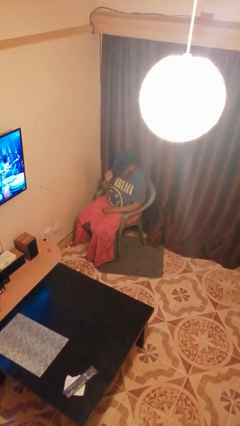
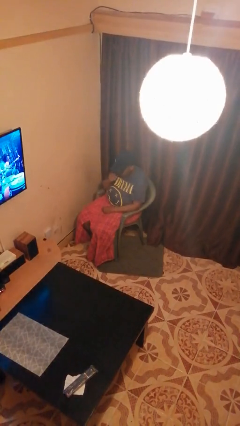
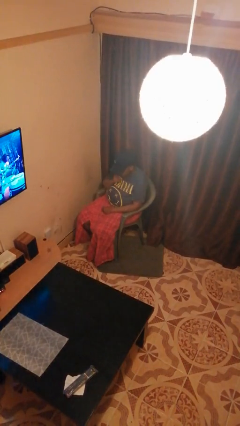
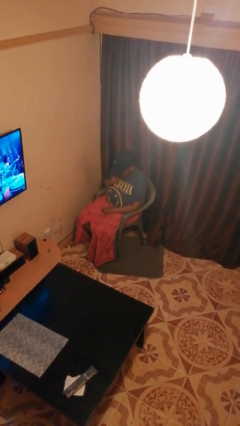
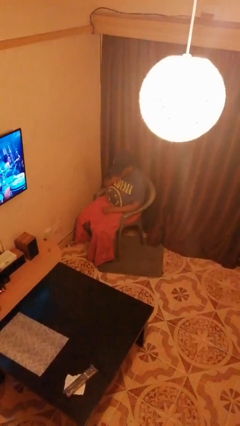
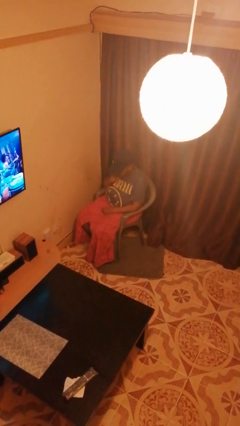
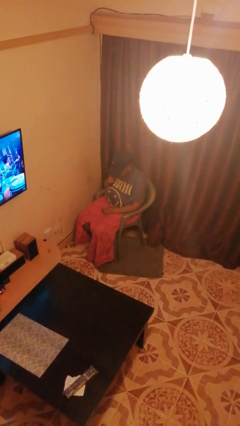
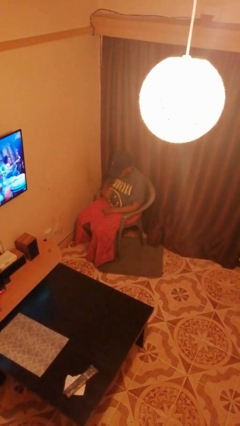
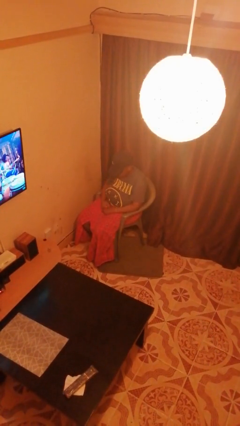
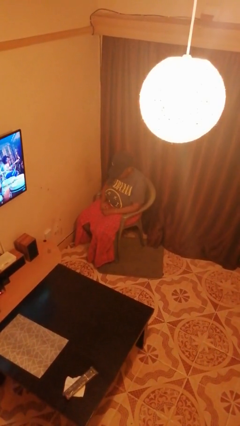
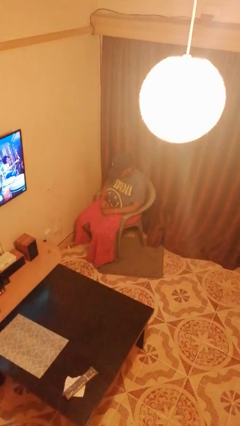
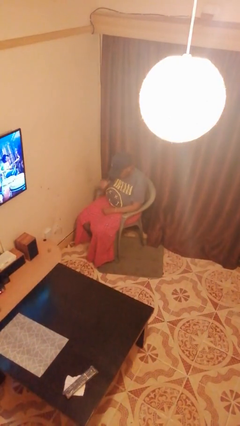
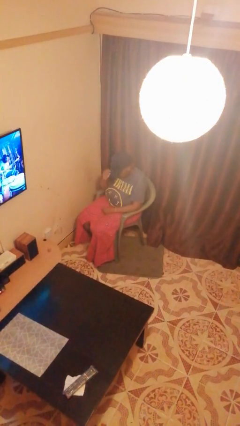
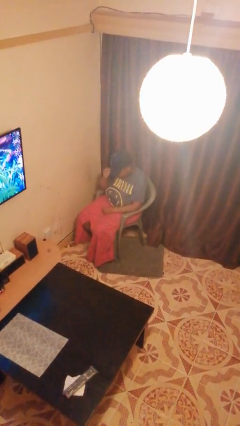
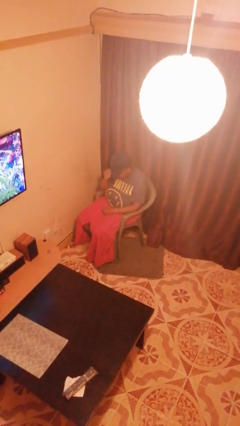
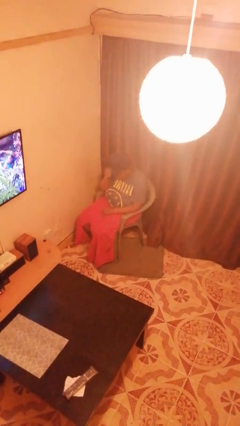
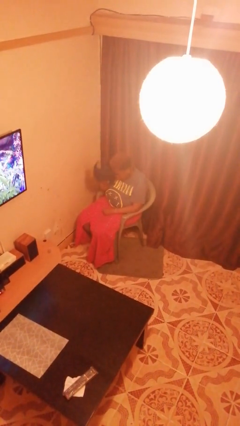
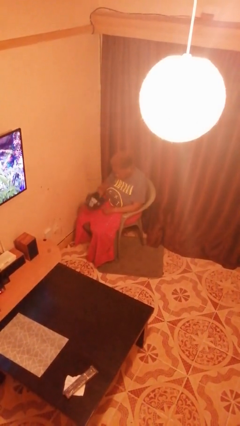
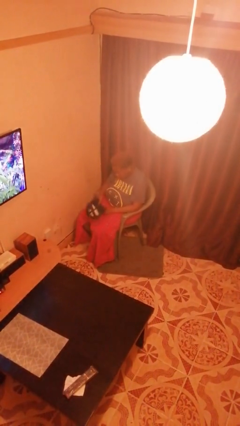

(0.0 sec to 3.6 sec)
person takes off hat

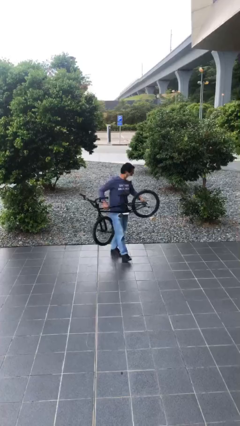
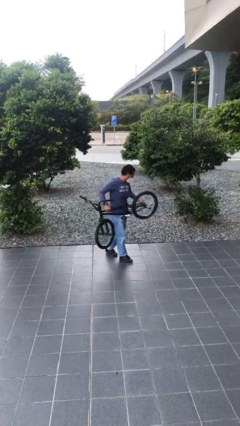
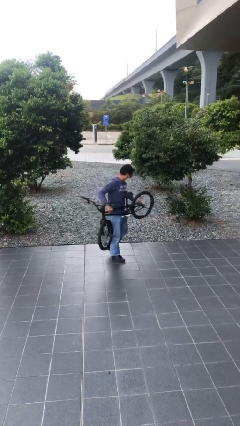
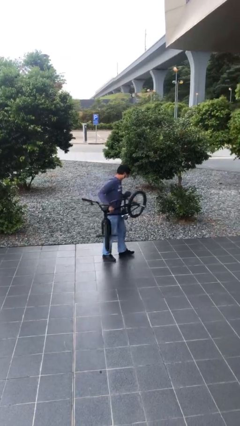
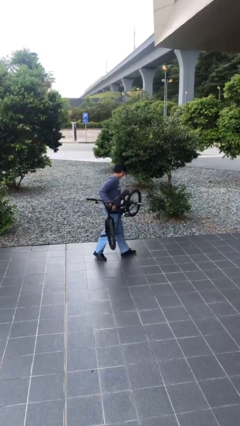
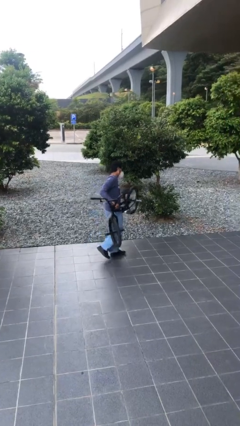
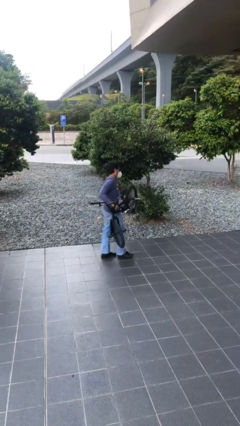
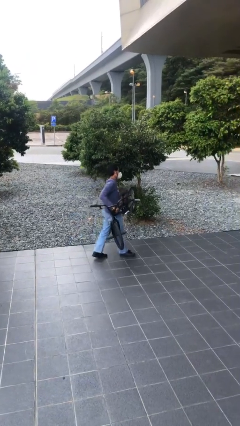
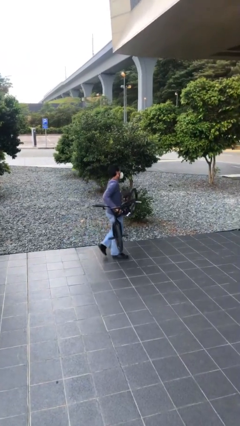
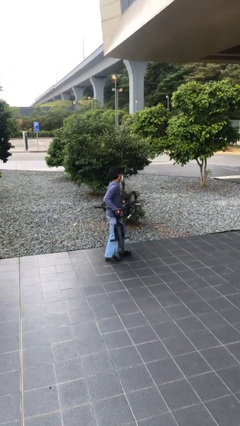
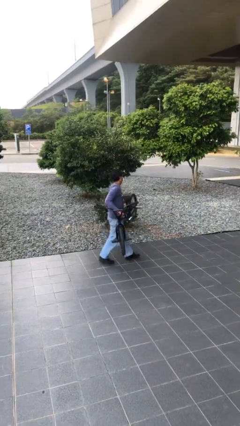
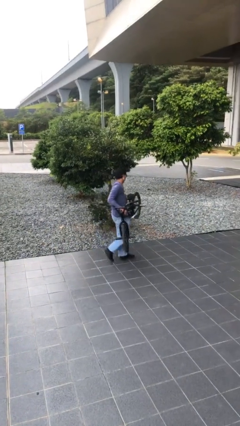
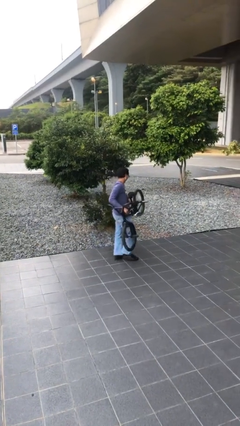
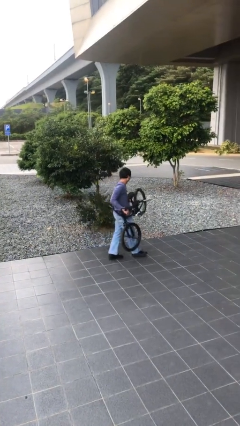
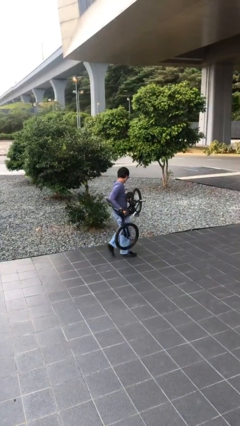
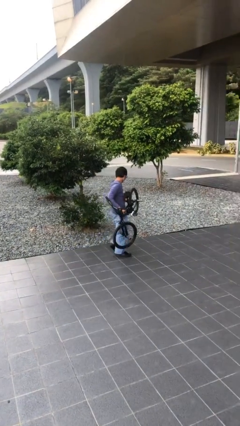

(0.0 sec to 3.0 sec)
person carries heavy object

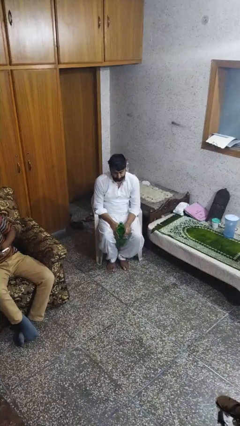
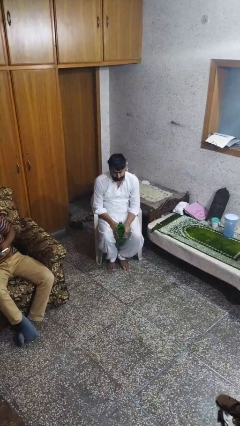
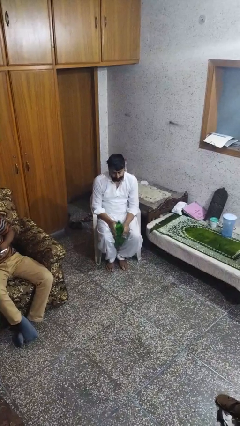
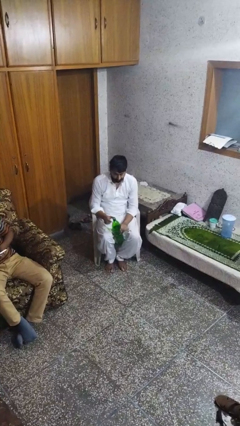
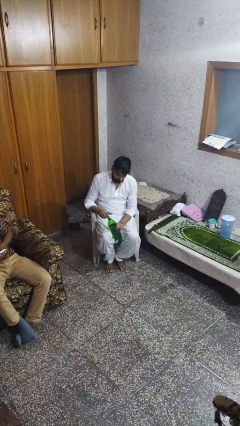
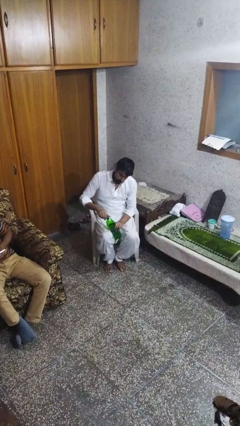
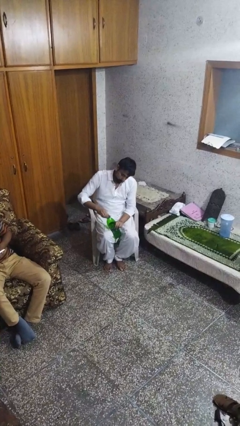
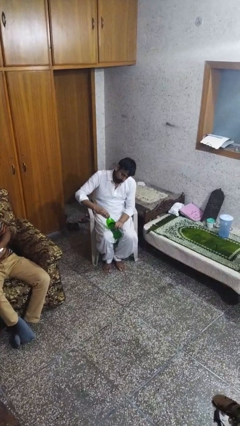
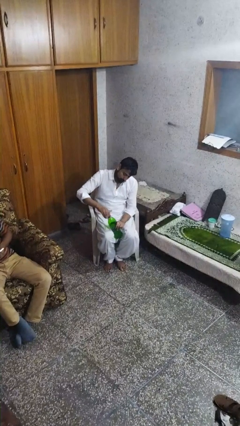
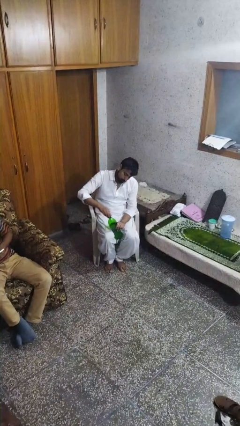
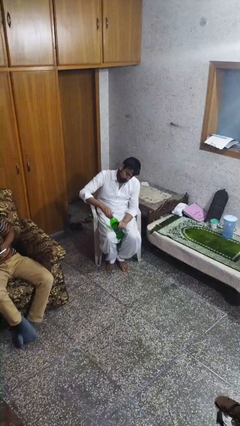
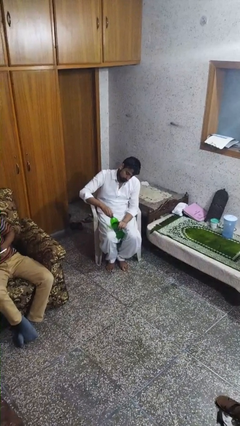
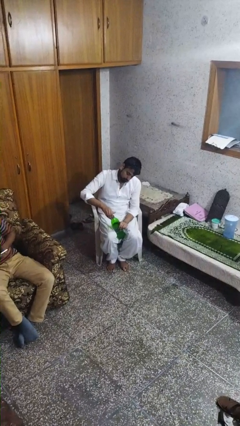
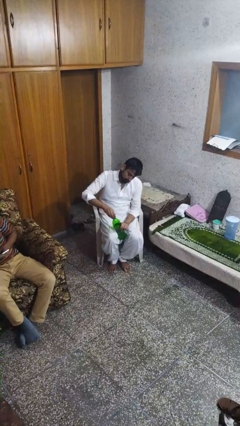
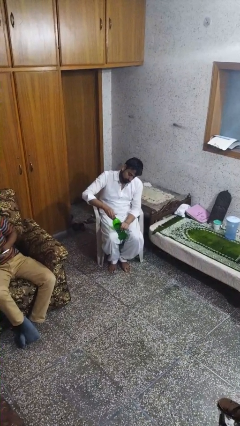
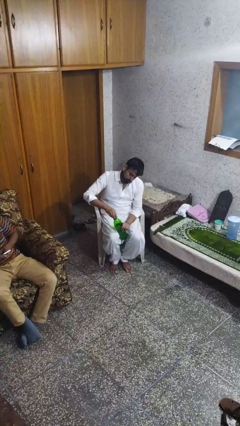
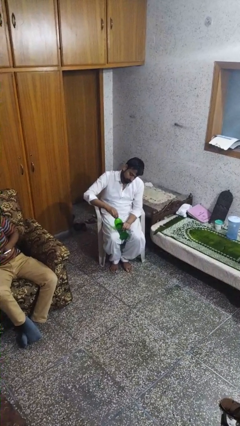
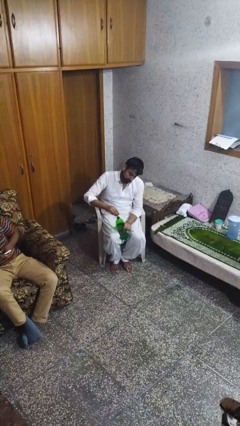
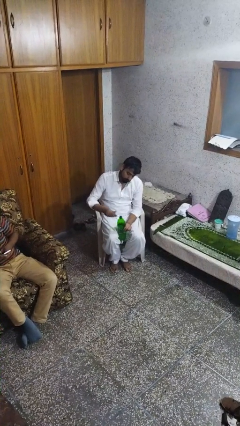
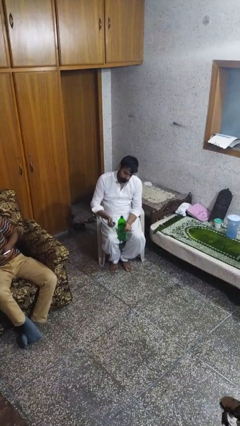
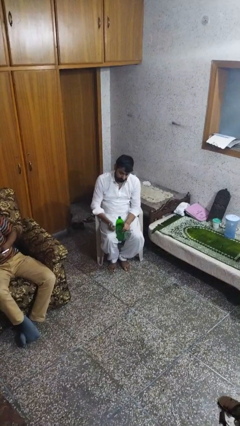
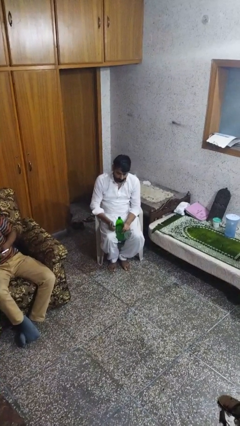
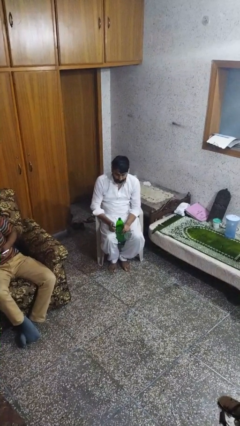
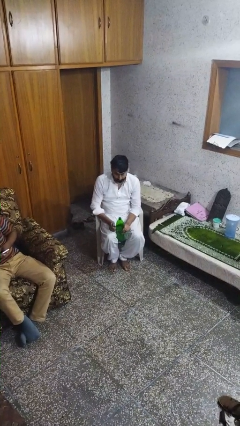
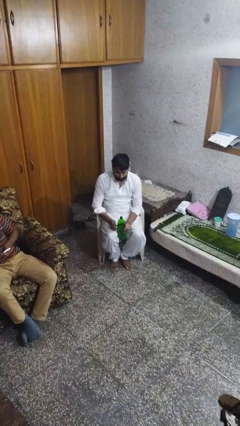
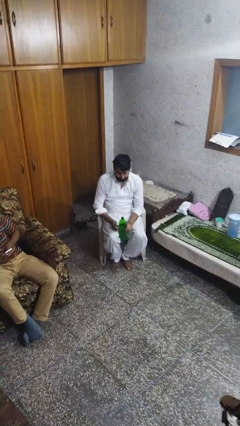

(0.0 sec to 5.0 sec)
person unscrews lid from bottle

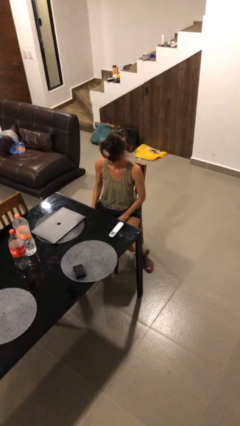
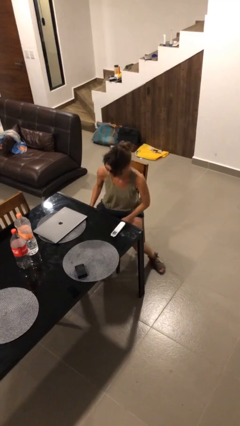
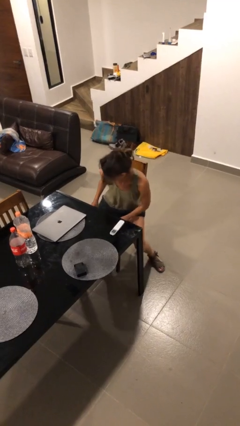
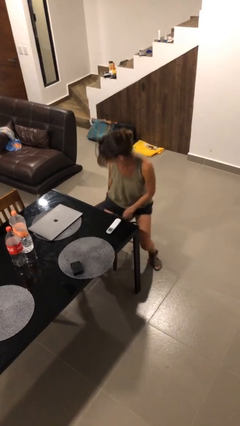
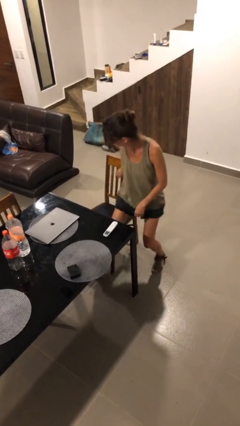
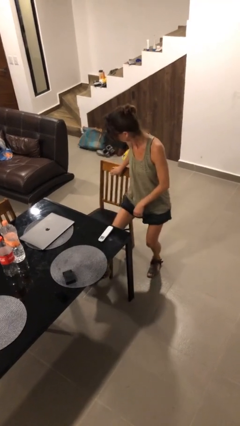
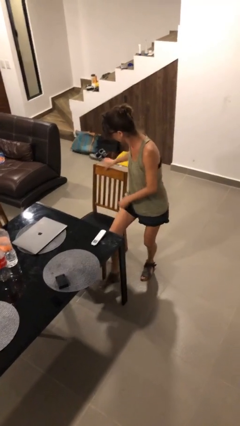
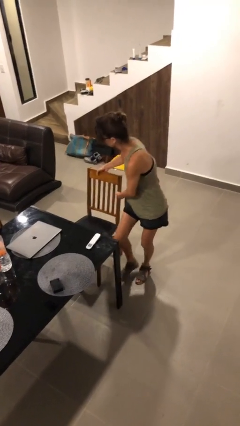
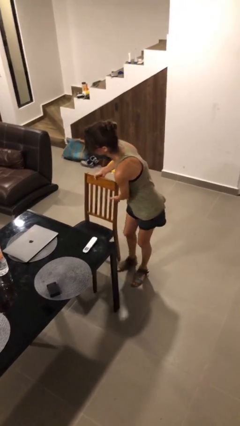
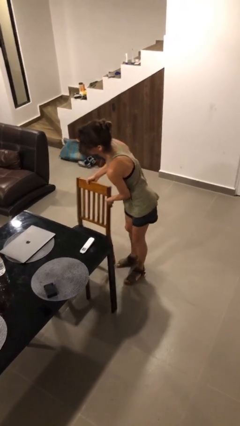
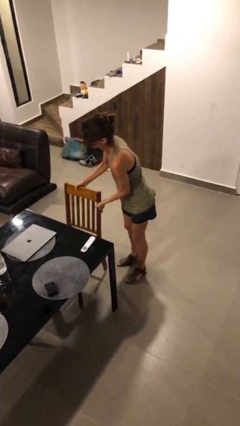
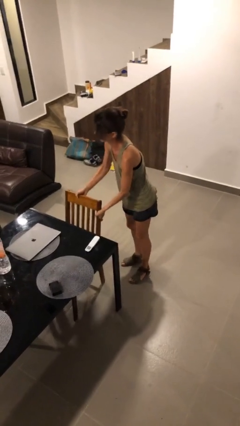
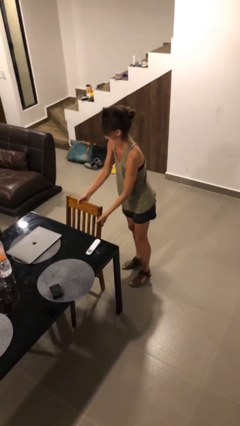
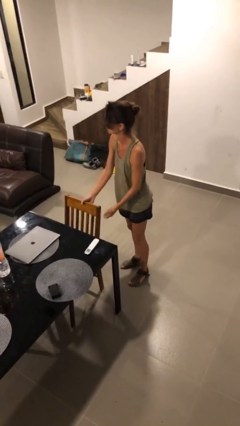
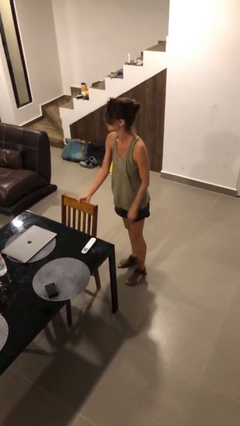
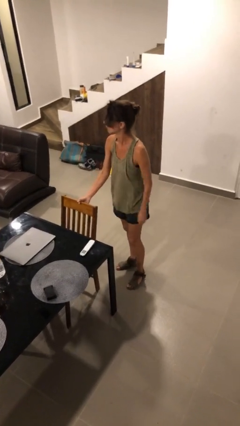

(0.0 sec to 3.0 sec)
person stands up

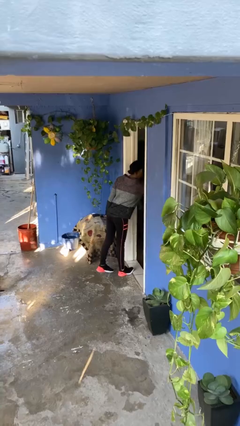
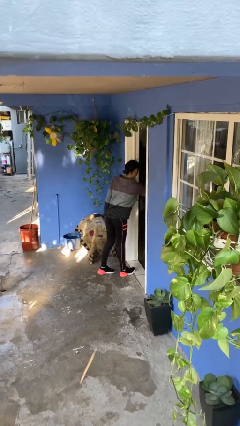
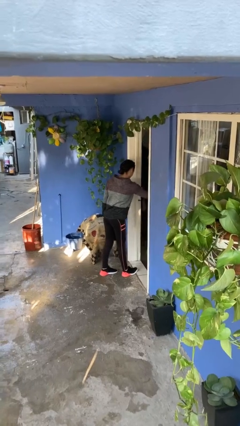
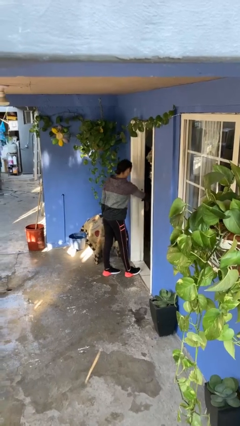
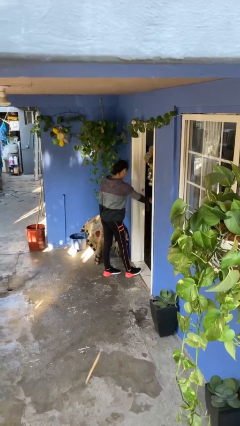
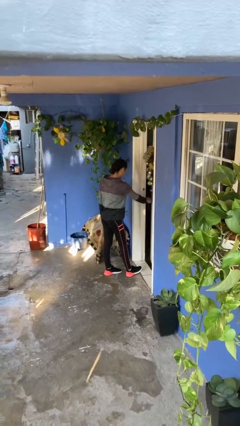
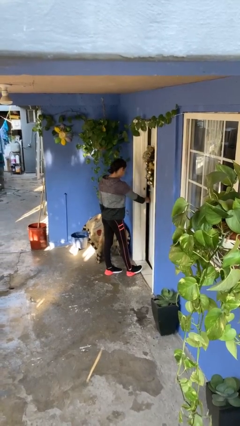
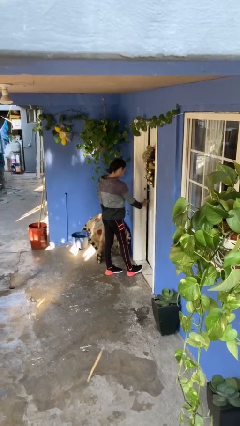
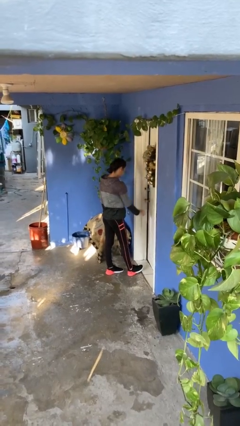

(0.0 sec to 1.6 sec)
person closes facility door

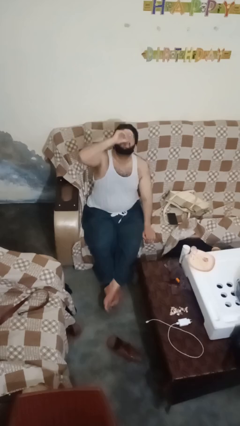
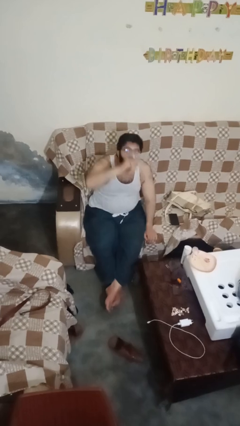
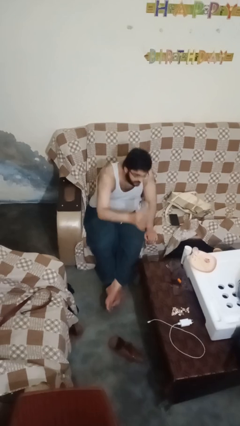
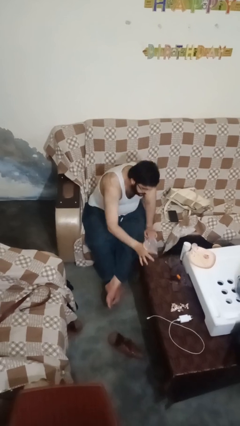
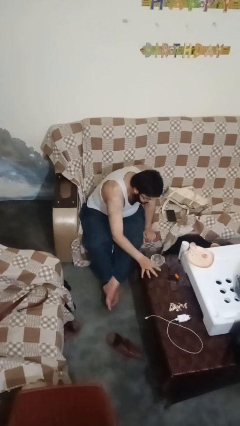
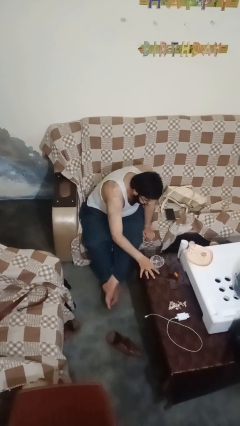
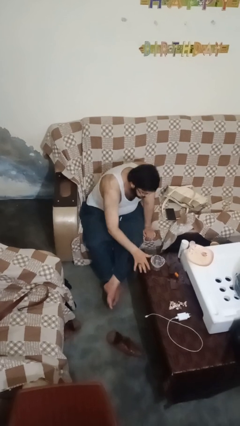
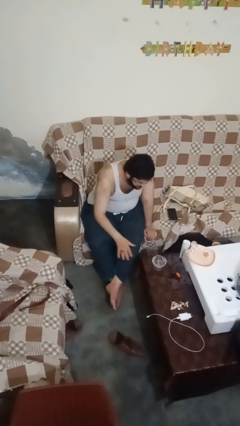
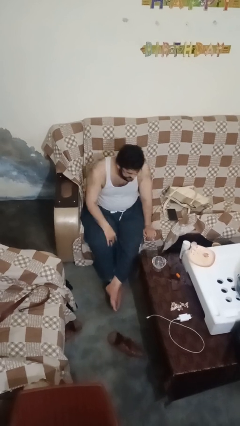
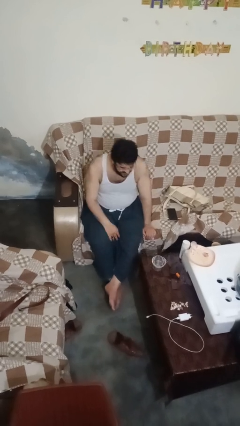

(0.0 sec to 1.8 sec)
person puts down object on table
